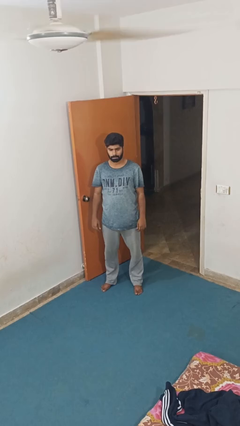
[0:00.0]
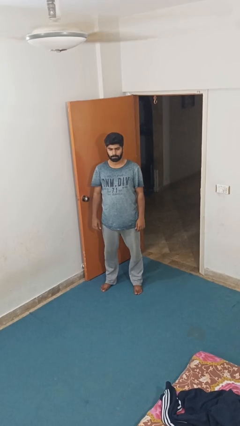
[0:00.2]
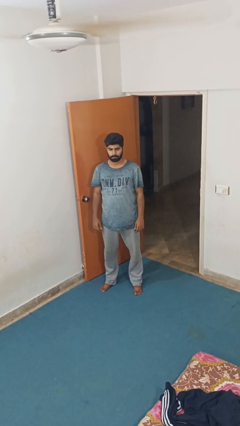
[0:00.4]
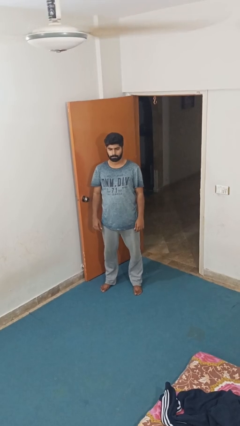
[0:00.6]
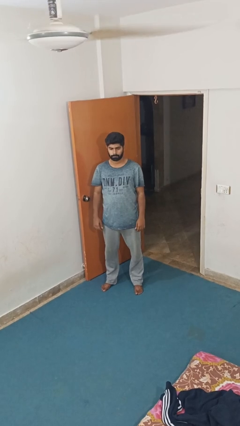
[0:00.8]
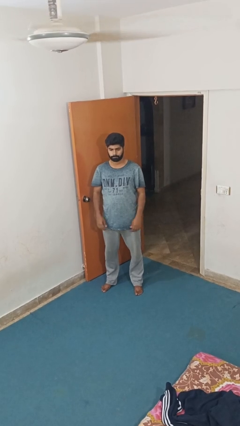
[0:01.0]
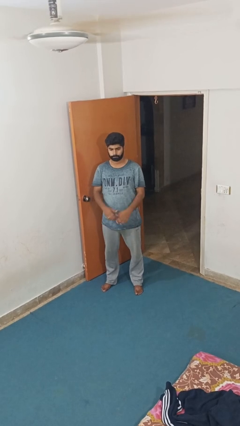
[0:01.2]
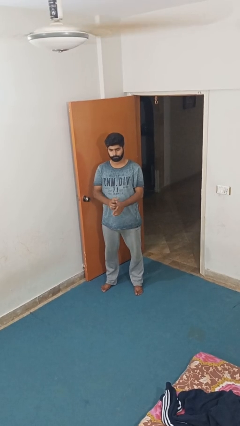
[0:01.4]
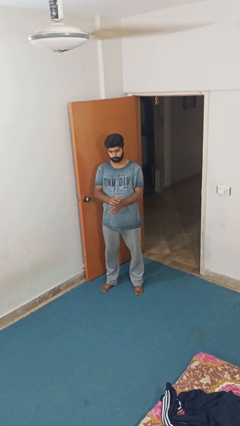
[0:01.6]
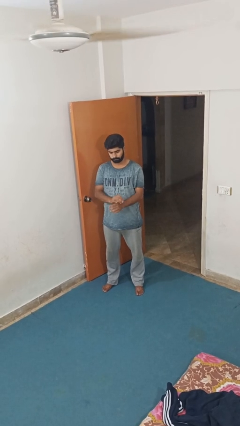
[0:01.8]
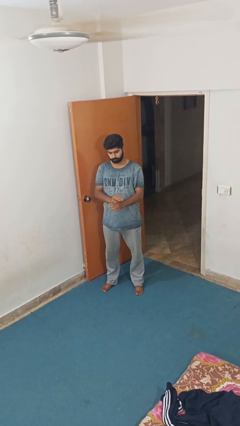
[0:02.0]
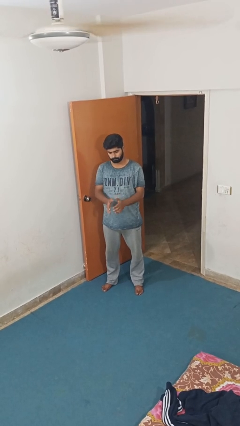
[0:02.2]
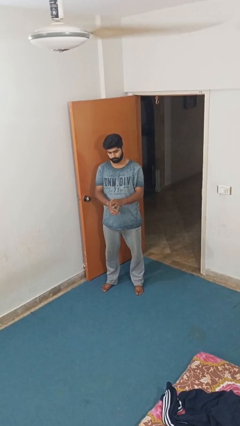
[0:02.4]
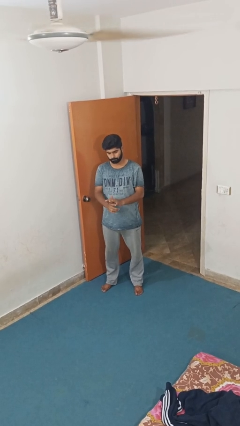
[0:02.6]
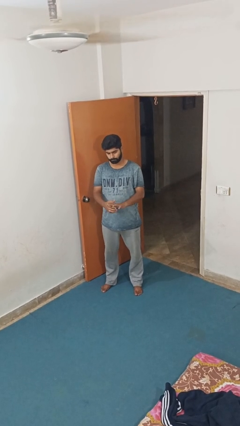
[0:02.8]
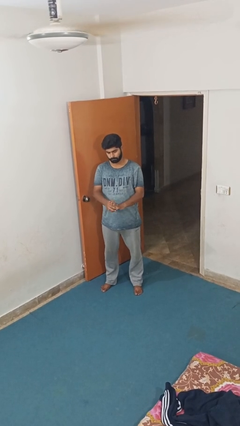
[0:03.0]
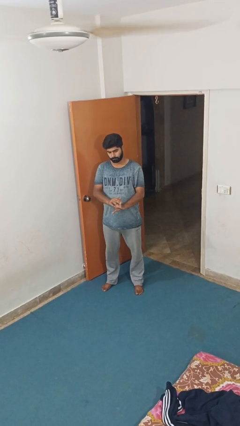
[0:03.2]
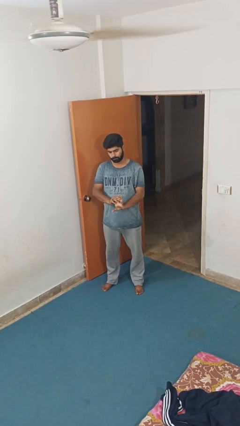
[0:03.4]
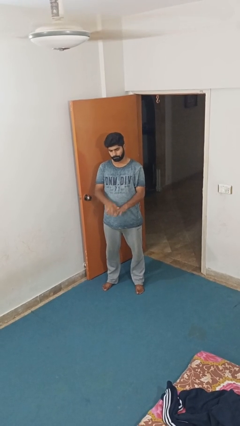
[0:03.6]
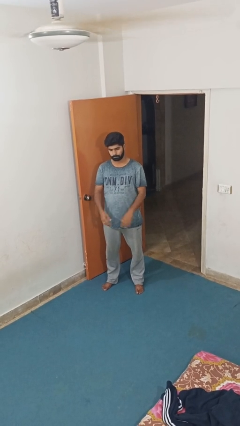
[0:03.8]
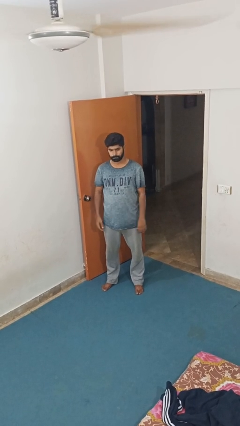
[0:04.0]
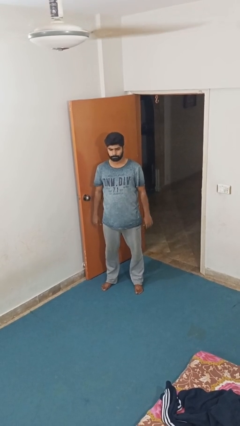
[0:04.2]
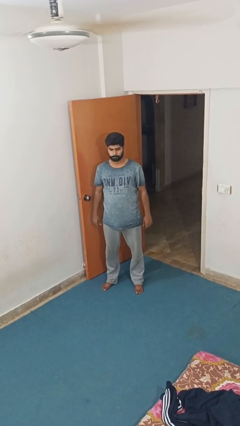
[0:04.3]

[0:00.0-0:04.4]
person snaps fingers

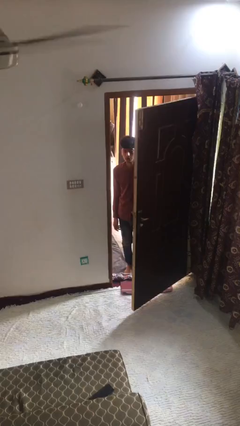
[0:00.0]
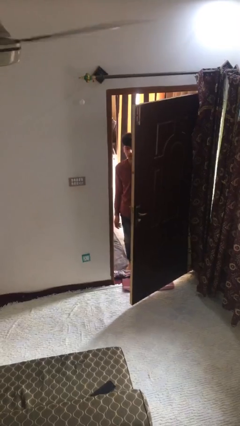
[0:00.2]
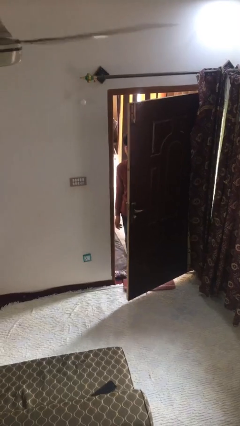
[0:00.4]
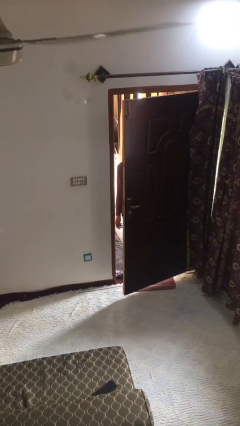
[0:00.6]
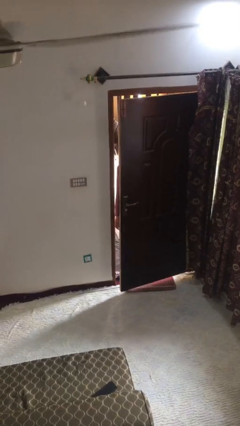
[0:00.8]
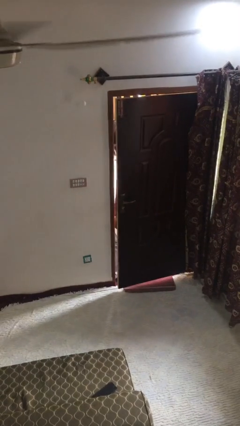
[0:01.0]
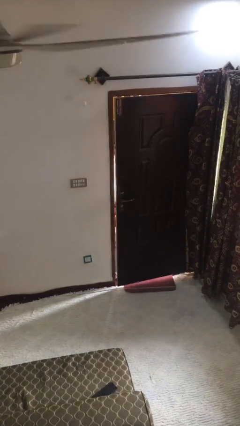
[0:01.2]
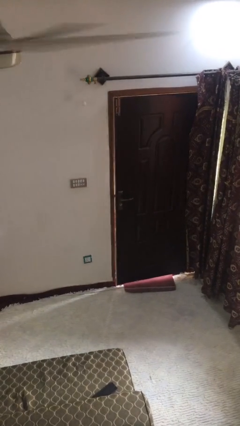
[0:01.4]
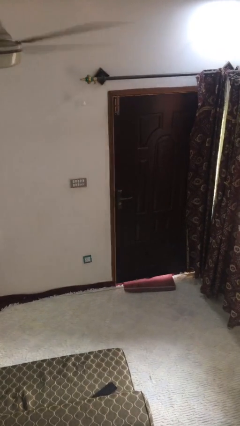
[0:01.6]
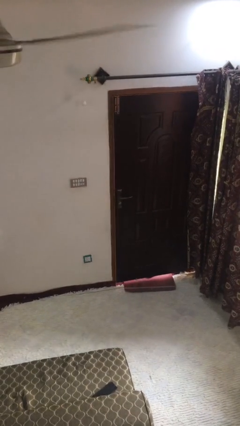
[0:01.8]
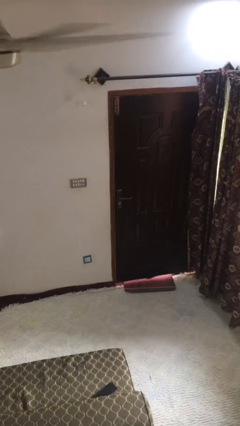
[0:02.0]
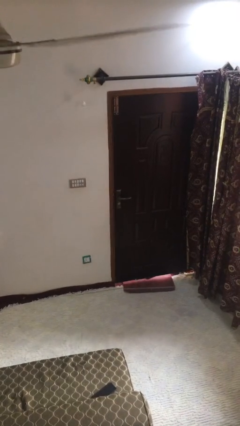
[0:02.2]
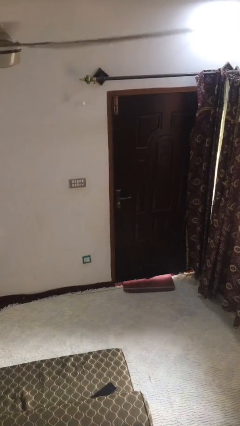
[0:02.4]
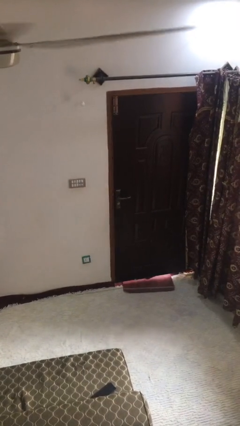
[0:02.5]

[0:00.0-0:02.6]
person closes facility door

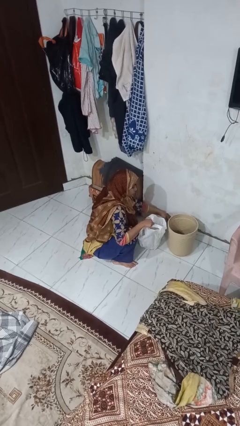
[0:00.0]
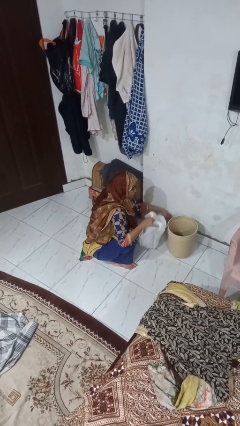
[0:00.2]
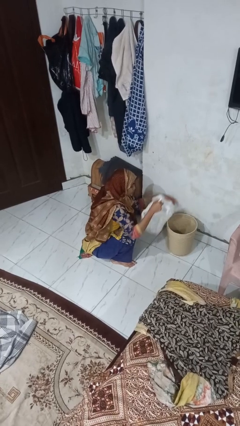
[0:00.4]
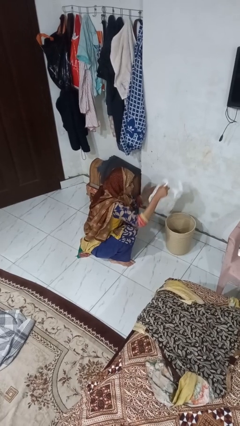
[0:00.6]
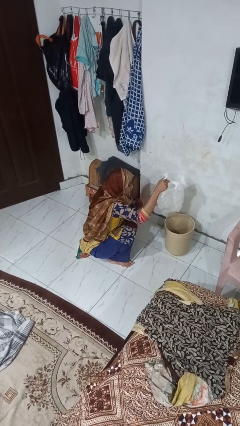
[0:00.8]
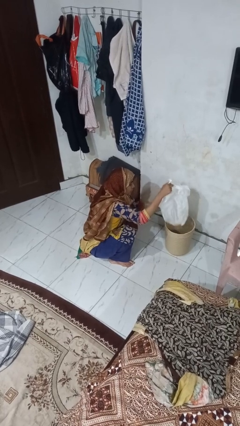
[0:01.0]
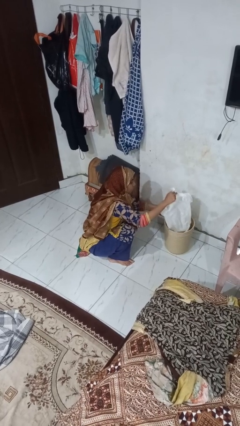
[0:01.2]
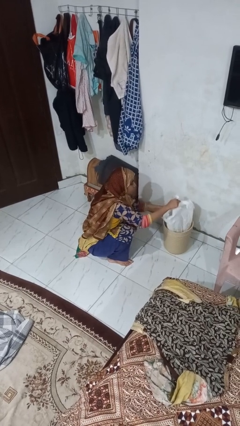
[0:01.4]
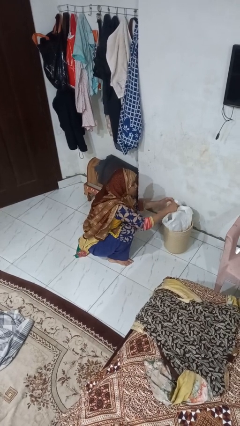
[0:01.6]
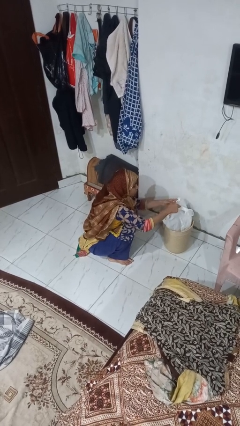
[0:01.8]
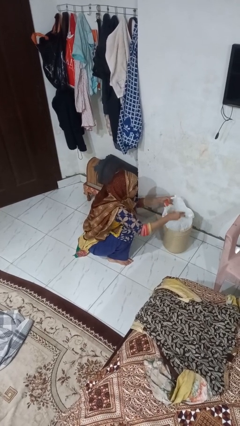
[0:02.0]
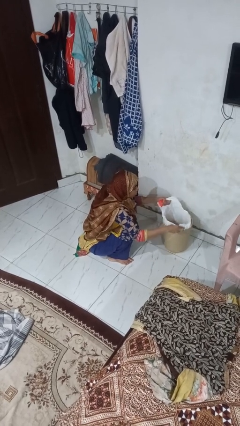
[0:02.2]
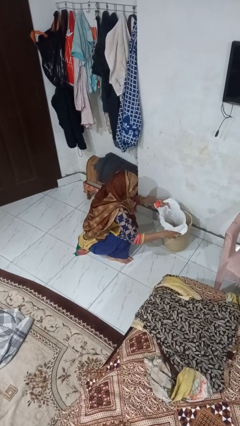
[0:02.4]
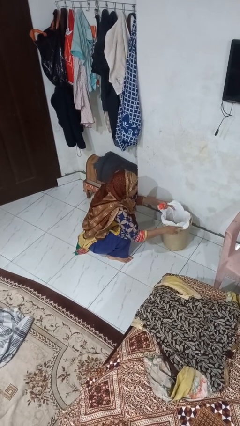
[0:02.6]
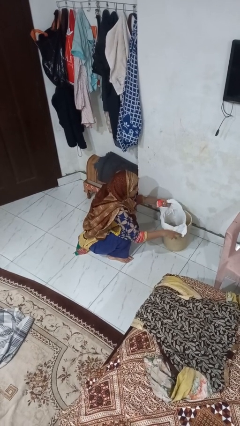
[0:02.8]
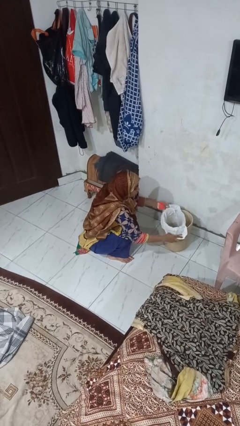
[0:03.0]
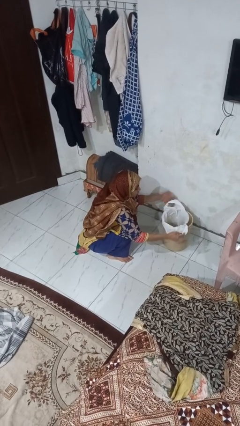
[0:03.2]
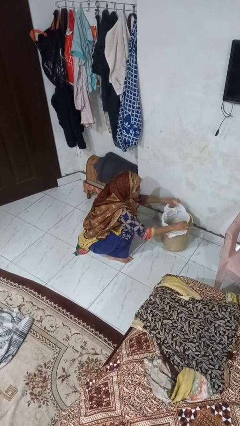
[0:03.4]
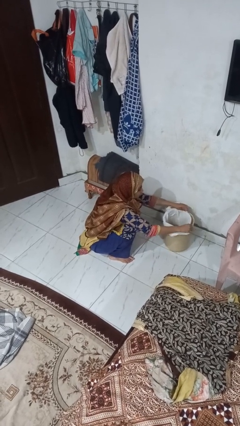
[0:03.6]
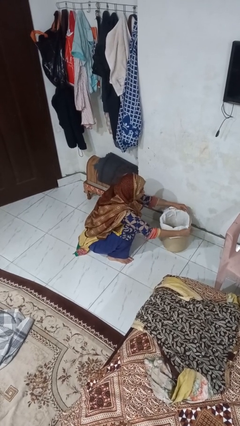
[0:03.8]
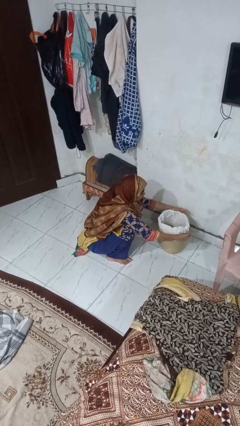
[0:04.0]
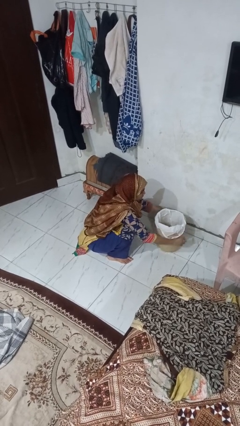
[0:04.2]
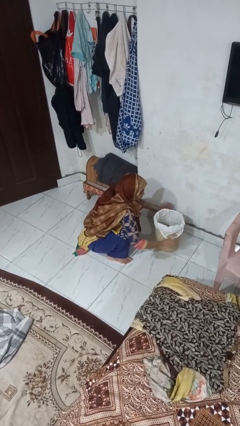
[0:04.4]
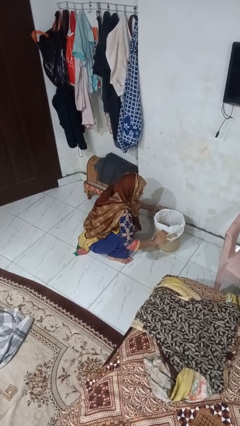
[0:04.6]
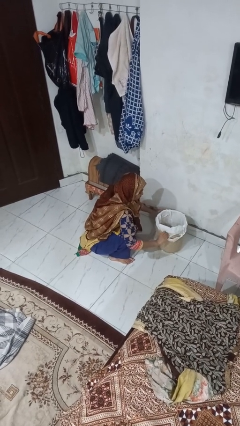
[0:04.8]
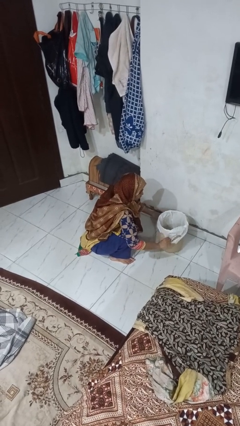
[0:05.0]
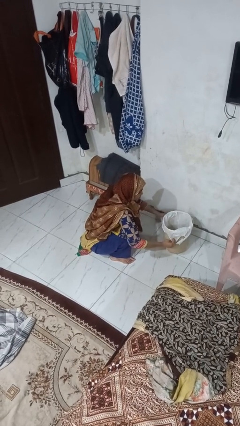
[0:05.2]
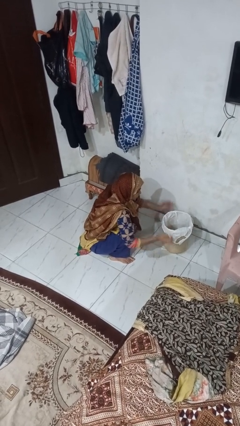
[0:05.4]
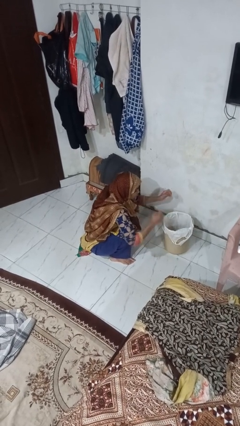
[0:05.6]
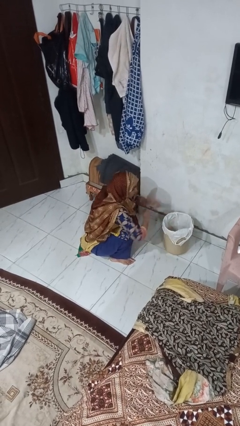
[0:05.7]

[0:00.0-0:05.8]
person inserts trashbag into trashcan

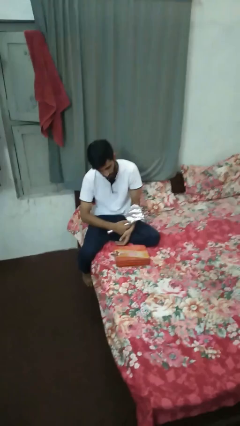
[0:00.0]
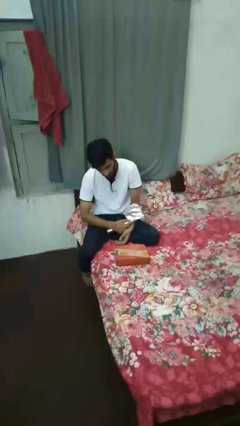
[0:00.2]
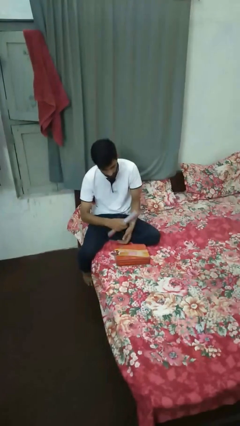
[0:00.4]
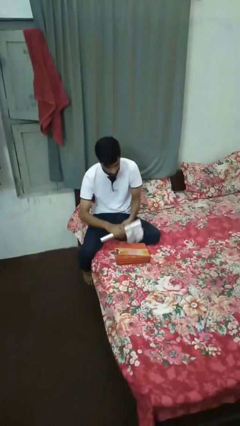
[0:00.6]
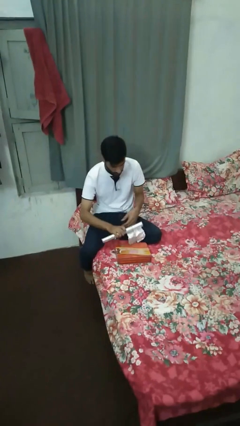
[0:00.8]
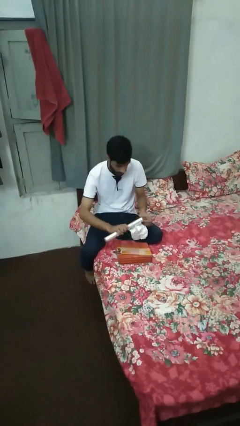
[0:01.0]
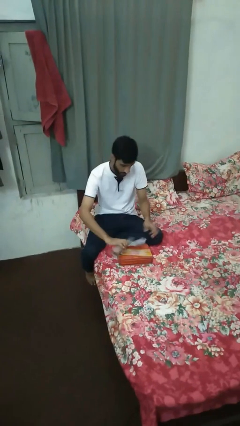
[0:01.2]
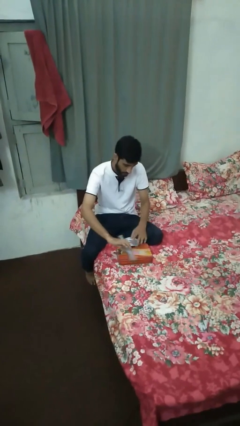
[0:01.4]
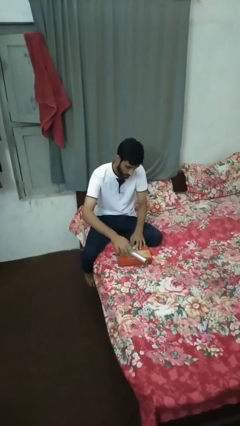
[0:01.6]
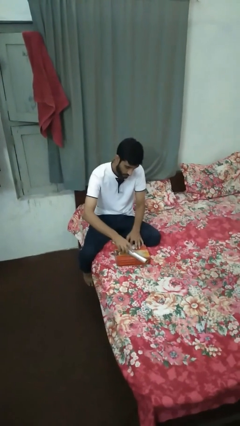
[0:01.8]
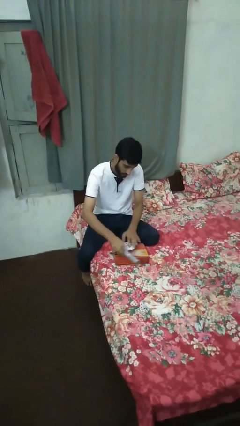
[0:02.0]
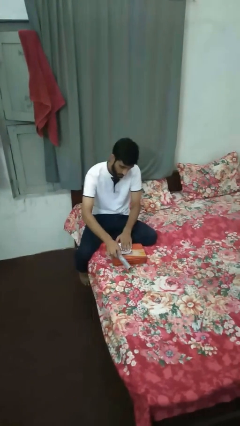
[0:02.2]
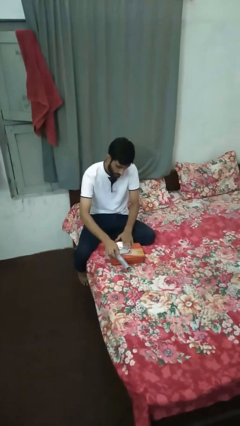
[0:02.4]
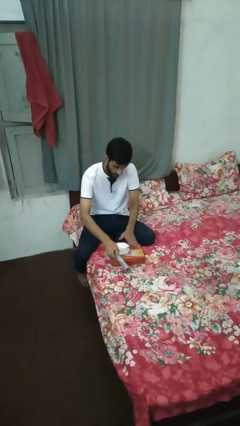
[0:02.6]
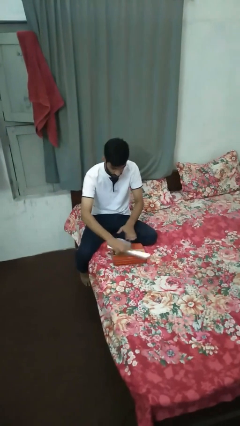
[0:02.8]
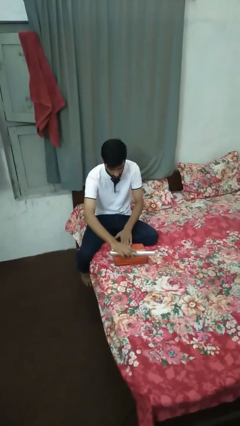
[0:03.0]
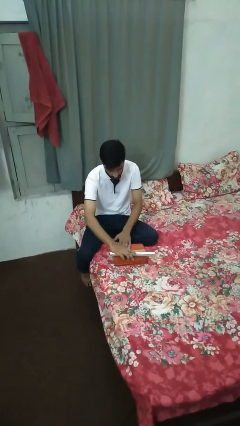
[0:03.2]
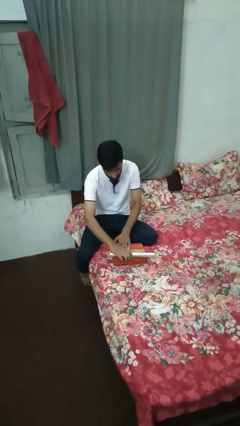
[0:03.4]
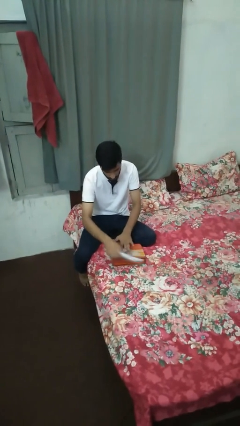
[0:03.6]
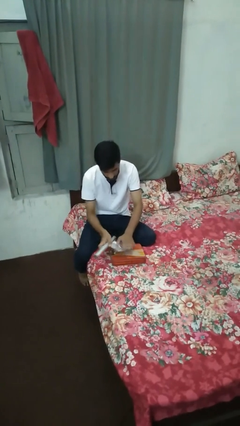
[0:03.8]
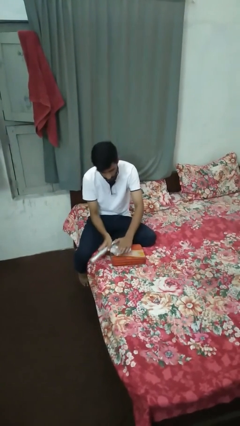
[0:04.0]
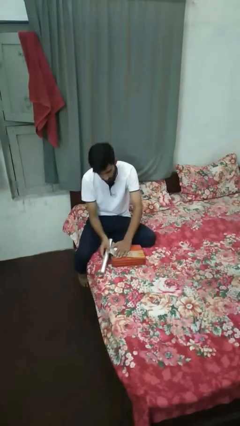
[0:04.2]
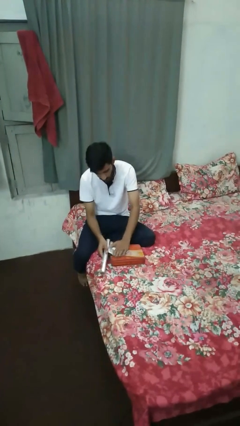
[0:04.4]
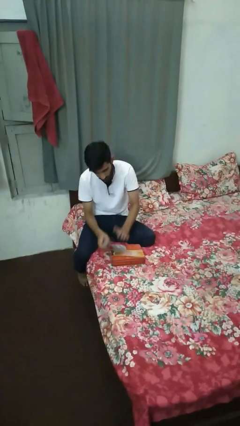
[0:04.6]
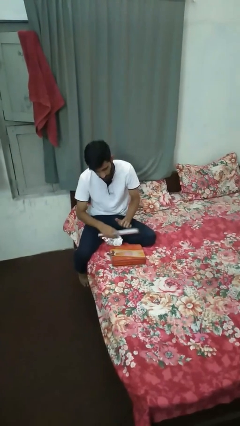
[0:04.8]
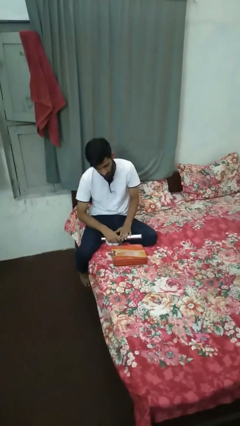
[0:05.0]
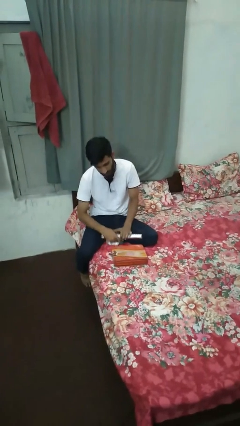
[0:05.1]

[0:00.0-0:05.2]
person wraps box
